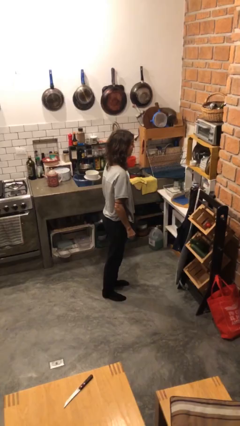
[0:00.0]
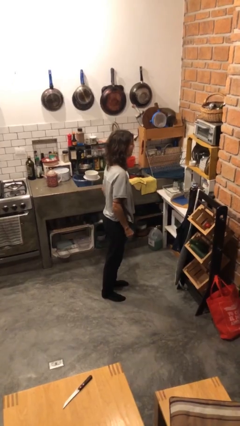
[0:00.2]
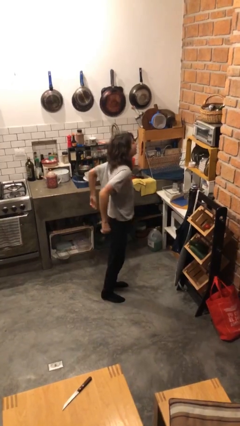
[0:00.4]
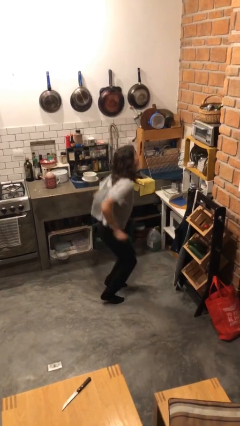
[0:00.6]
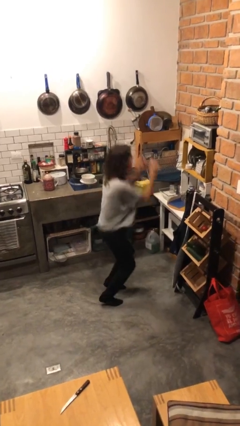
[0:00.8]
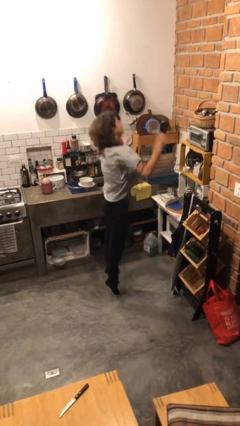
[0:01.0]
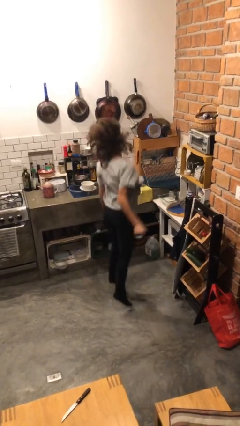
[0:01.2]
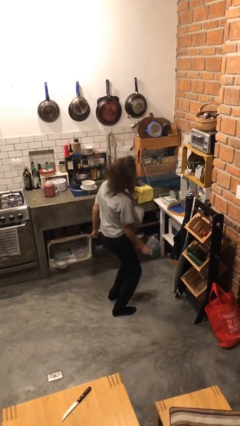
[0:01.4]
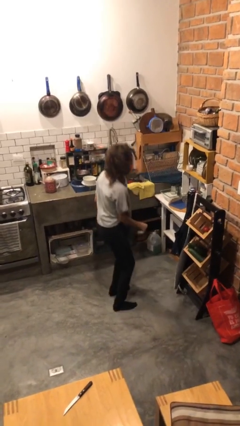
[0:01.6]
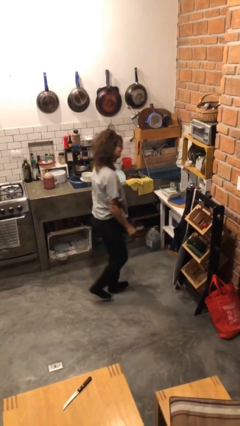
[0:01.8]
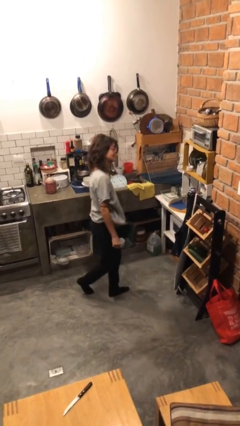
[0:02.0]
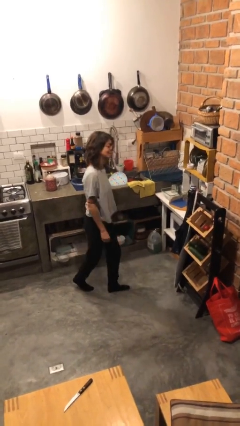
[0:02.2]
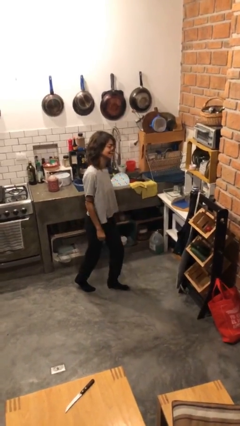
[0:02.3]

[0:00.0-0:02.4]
person jumps

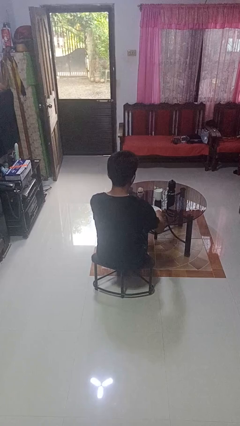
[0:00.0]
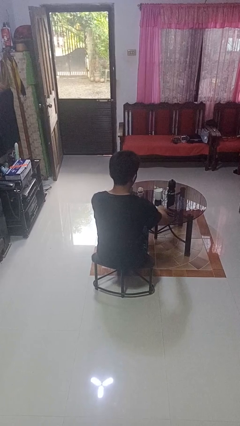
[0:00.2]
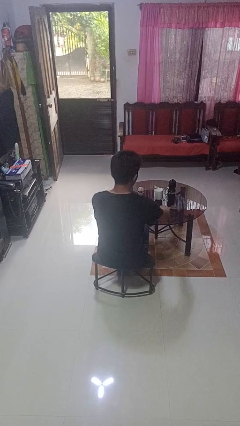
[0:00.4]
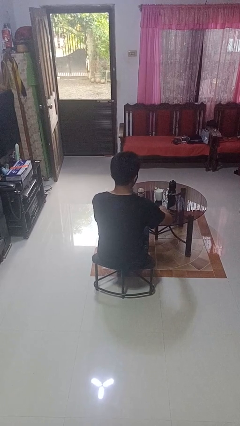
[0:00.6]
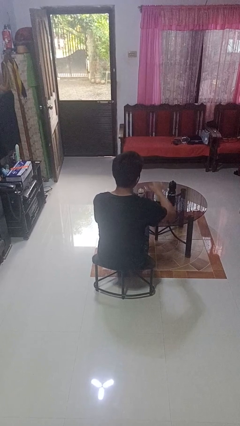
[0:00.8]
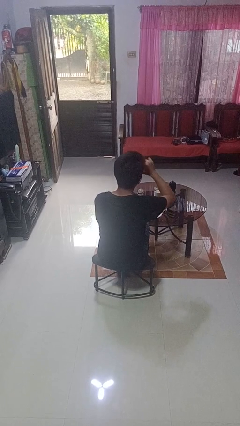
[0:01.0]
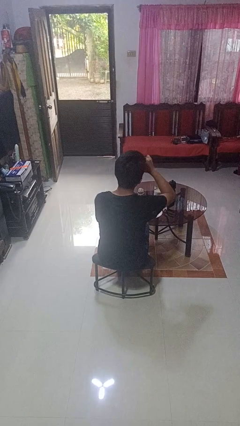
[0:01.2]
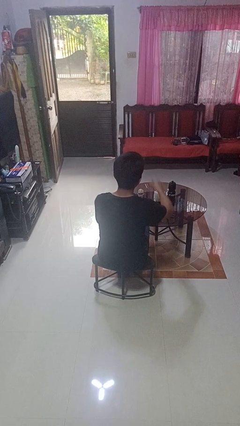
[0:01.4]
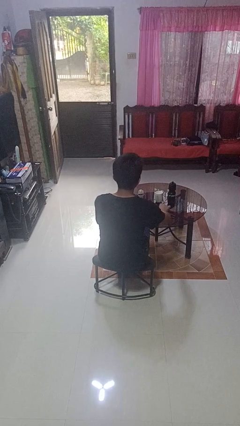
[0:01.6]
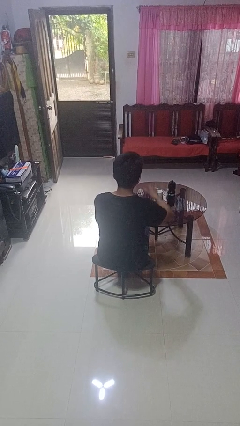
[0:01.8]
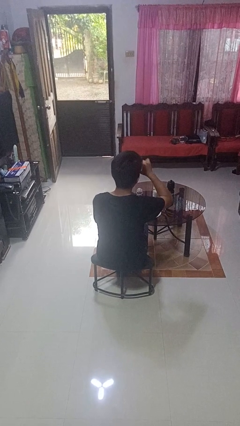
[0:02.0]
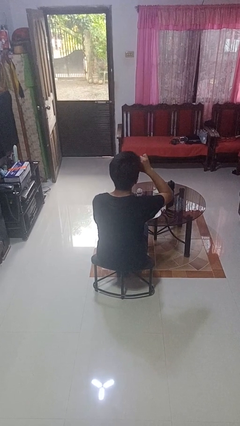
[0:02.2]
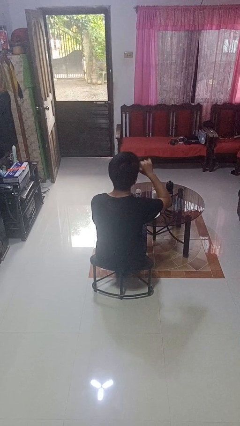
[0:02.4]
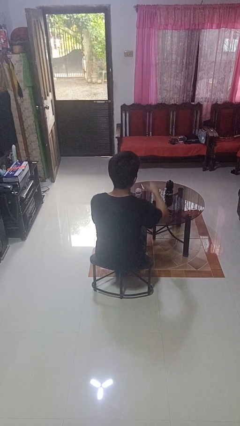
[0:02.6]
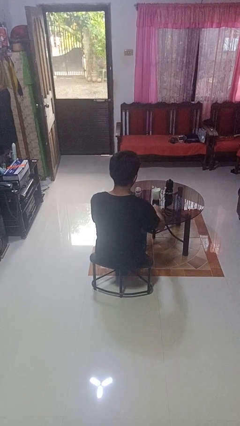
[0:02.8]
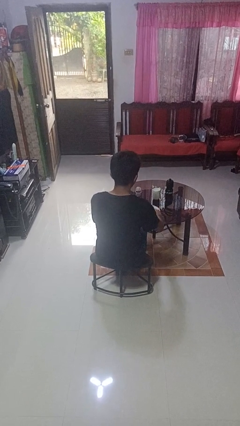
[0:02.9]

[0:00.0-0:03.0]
person eats with utensil

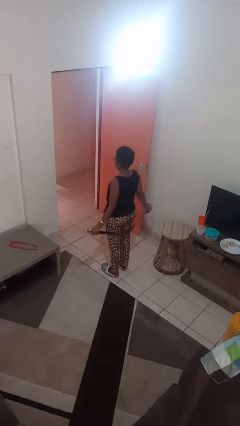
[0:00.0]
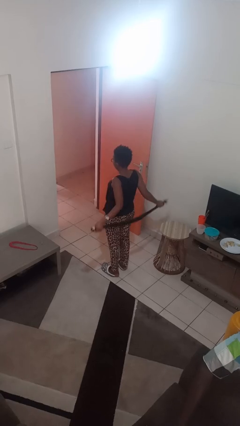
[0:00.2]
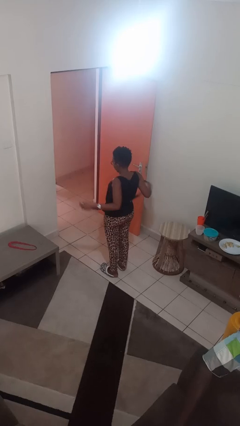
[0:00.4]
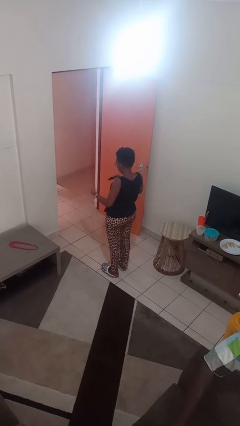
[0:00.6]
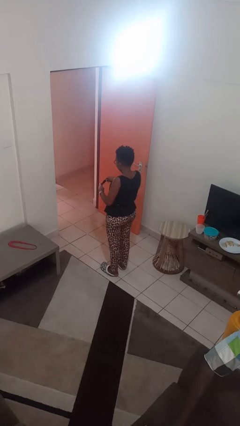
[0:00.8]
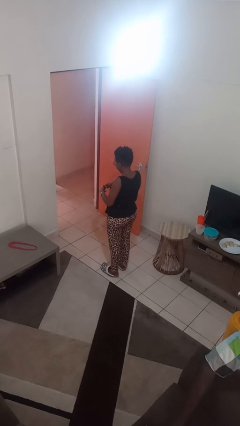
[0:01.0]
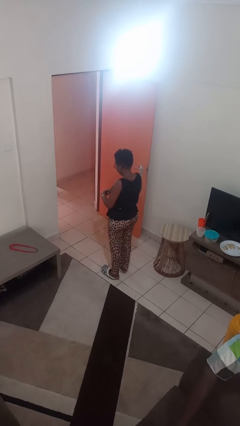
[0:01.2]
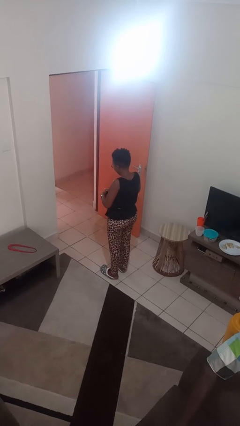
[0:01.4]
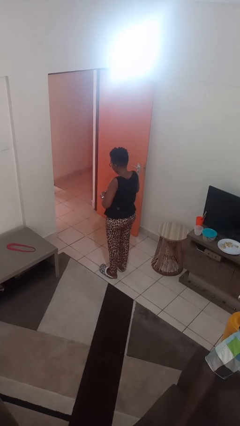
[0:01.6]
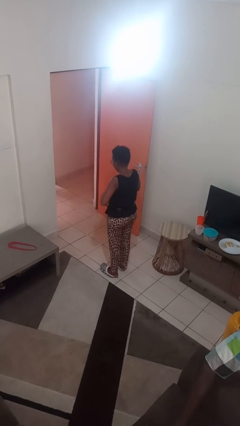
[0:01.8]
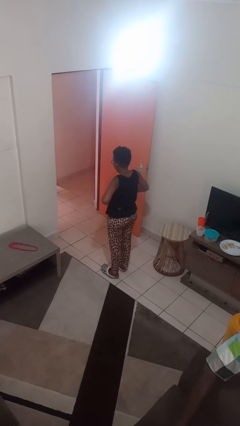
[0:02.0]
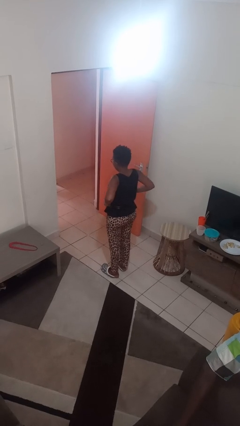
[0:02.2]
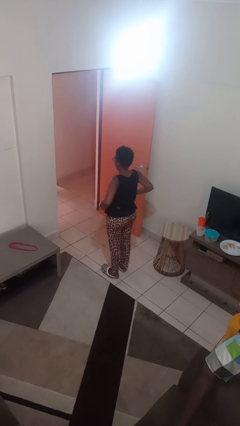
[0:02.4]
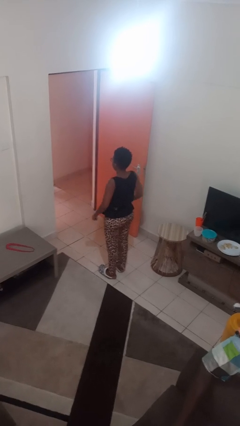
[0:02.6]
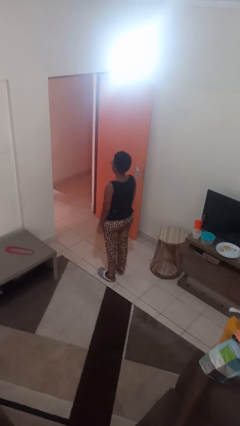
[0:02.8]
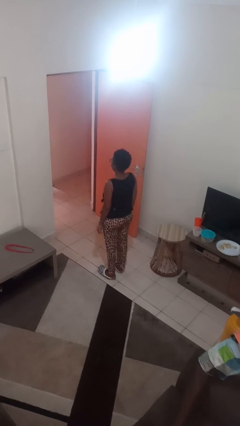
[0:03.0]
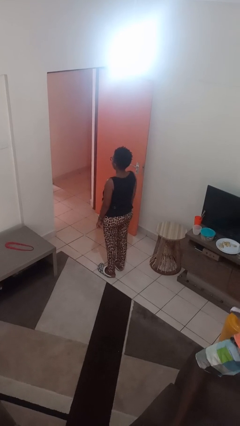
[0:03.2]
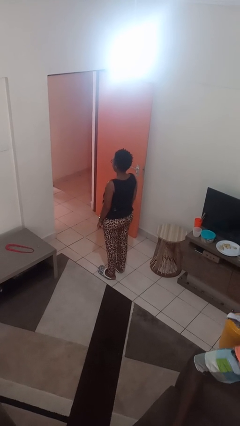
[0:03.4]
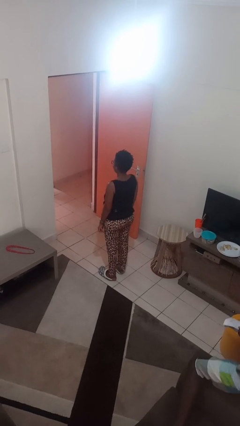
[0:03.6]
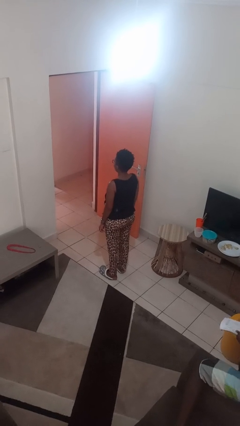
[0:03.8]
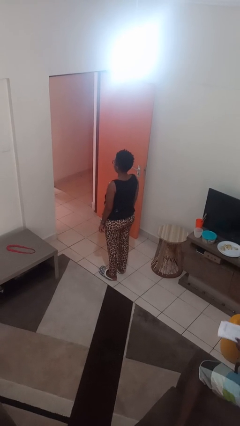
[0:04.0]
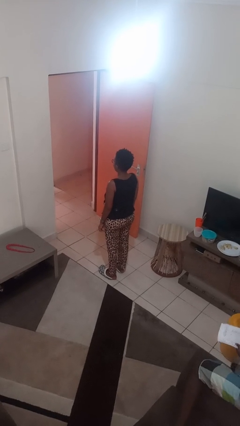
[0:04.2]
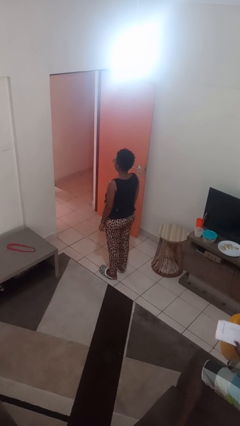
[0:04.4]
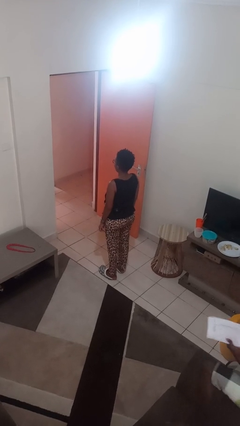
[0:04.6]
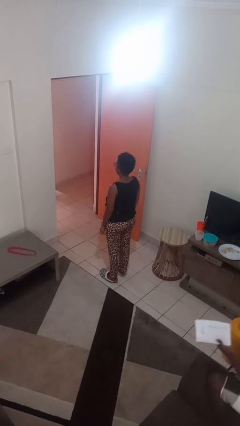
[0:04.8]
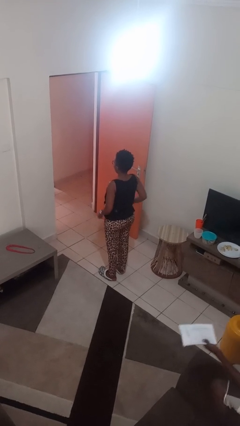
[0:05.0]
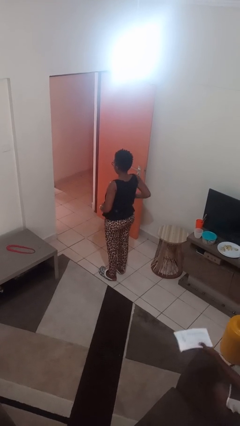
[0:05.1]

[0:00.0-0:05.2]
person puts on belt

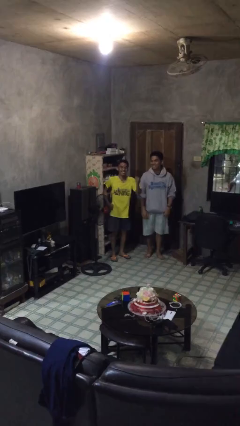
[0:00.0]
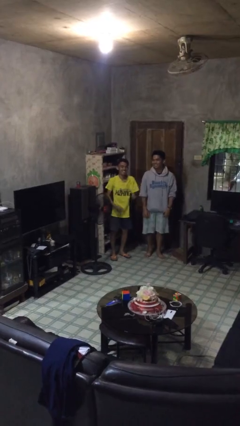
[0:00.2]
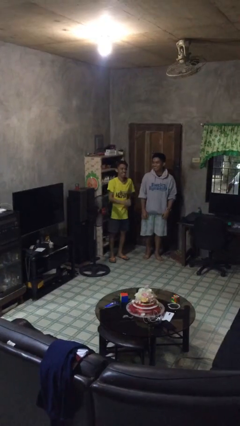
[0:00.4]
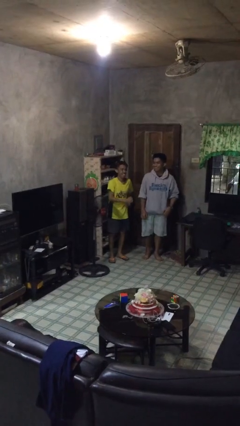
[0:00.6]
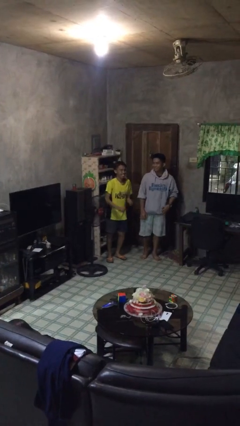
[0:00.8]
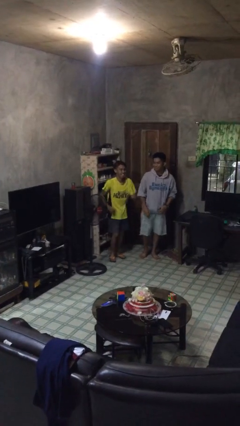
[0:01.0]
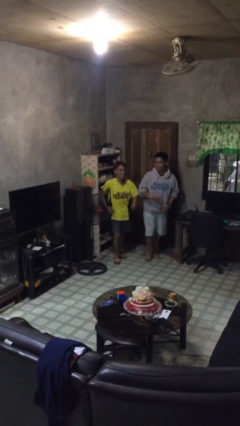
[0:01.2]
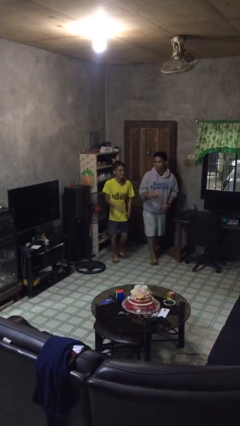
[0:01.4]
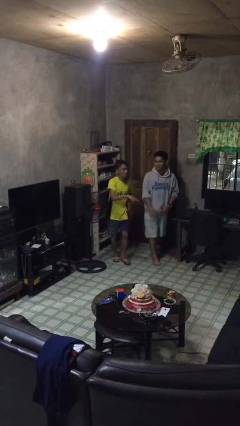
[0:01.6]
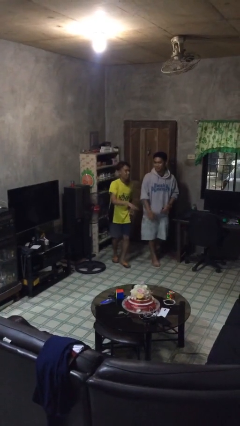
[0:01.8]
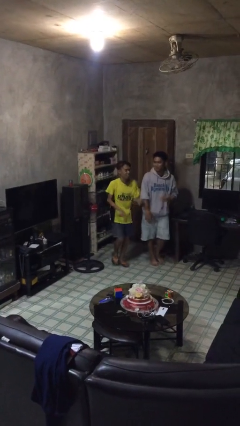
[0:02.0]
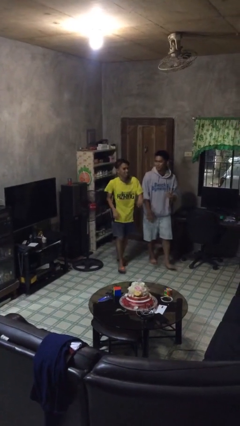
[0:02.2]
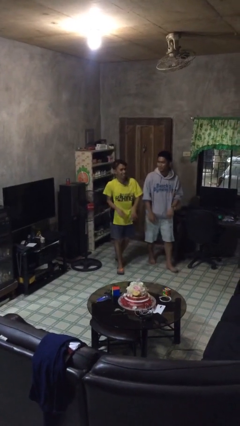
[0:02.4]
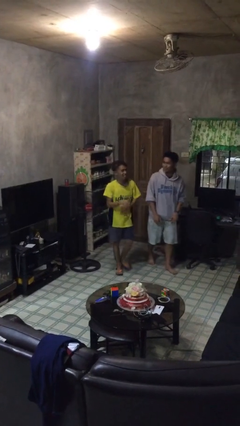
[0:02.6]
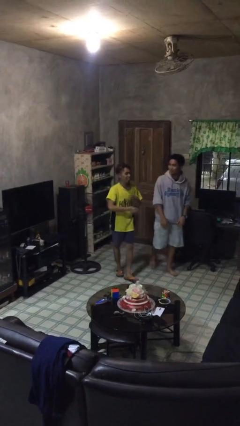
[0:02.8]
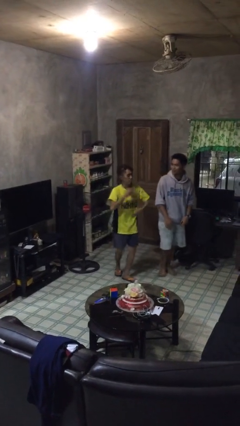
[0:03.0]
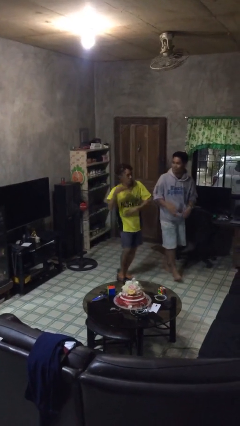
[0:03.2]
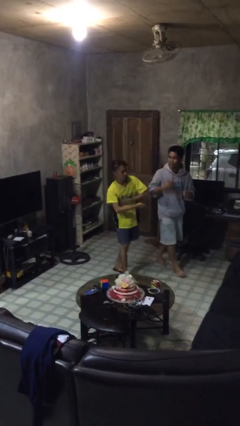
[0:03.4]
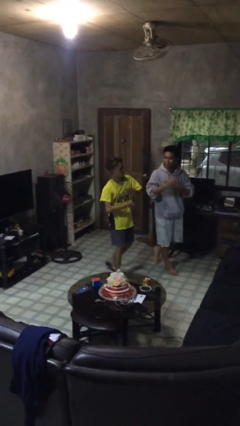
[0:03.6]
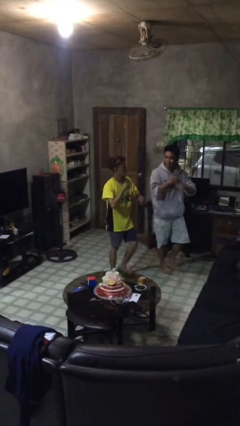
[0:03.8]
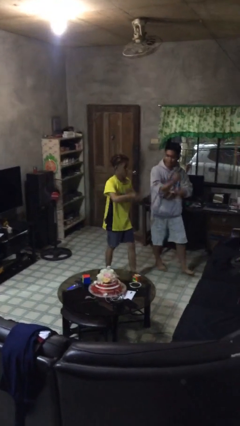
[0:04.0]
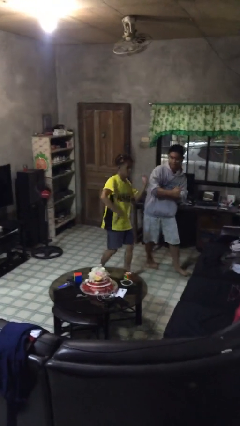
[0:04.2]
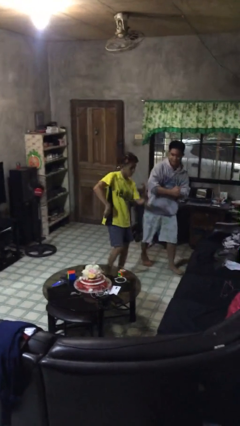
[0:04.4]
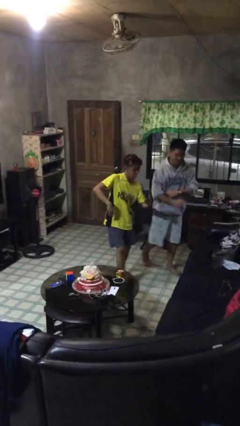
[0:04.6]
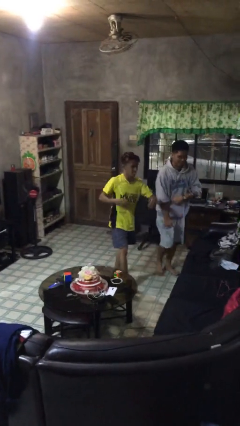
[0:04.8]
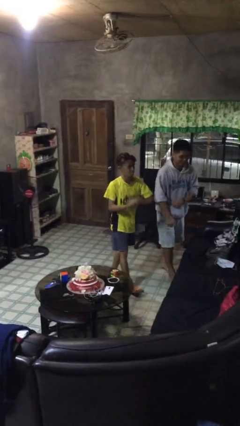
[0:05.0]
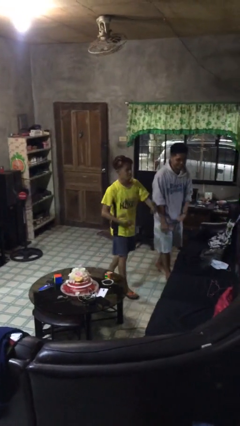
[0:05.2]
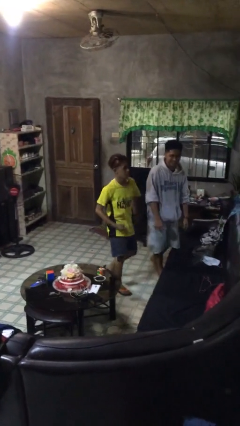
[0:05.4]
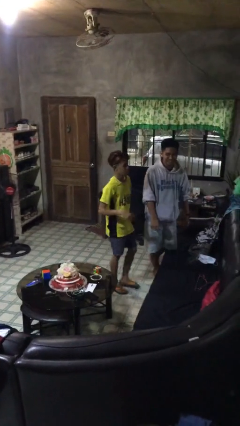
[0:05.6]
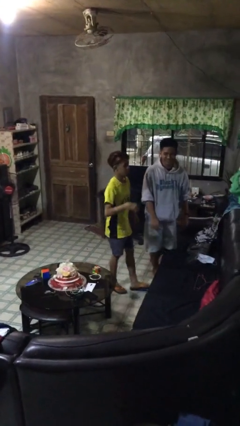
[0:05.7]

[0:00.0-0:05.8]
person talks to person

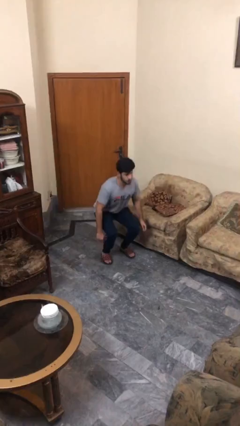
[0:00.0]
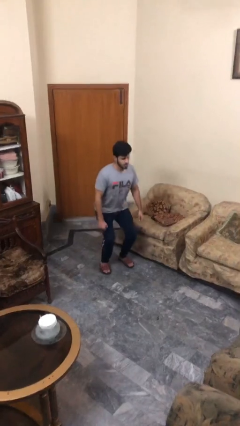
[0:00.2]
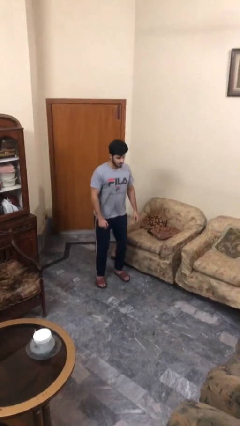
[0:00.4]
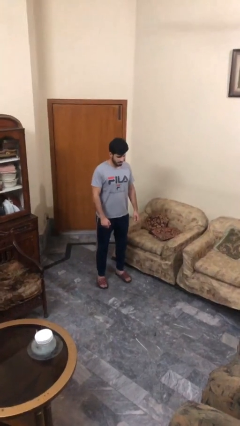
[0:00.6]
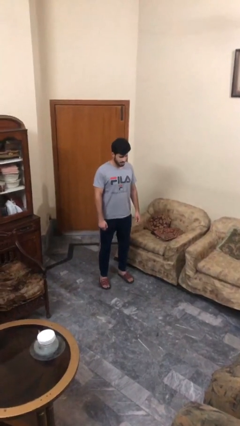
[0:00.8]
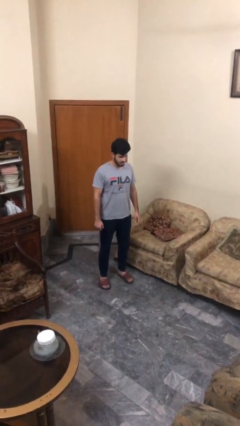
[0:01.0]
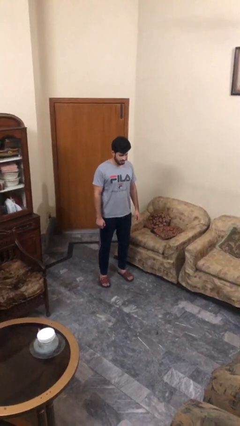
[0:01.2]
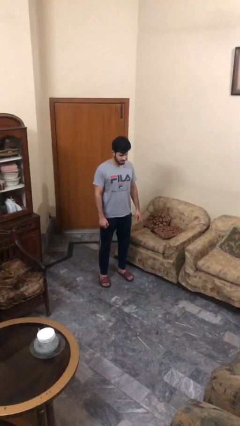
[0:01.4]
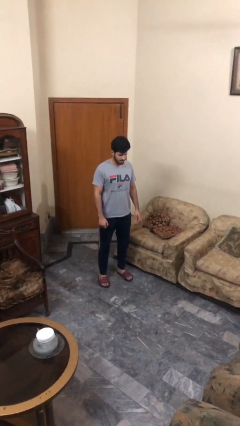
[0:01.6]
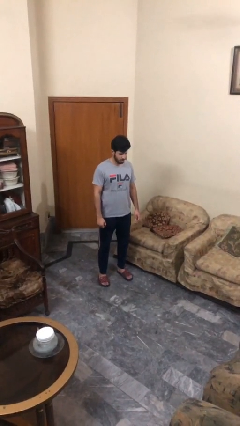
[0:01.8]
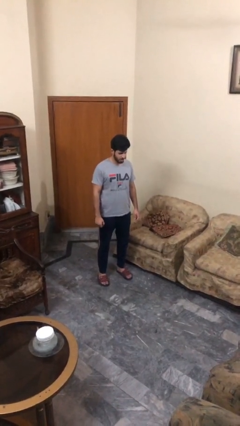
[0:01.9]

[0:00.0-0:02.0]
person stands up
